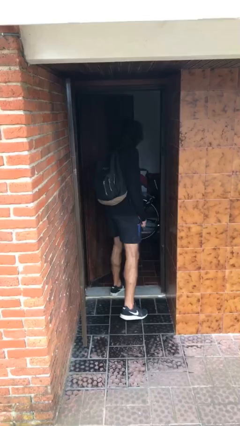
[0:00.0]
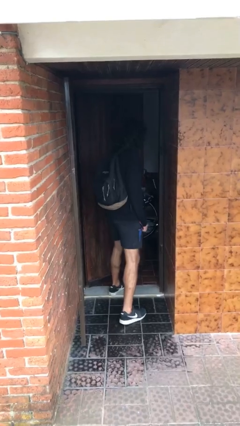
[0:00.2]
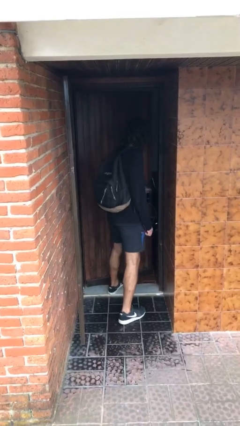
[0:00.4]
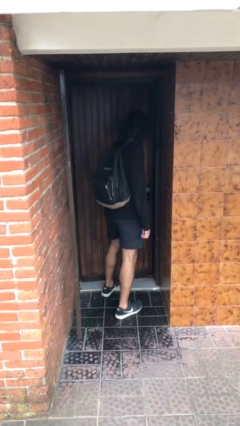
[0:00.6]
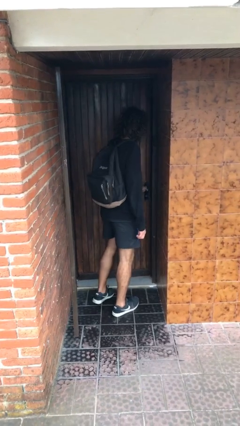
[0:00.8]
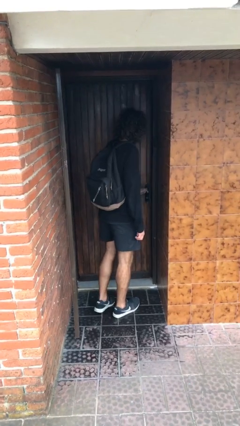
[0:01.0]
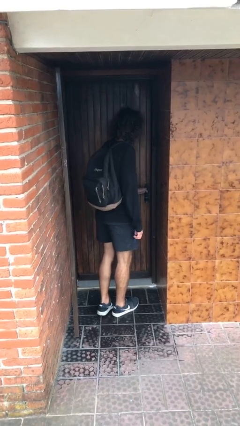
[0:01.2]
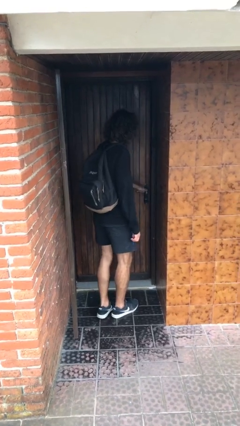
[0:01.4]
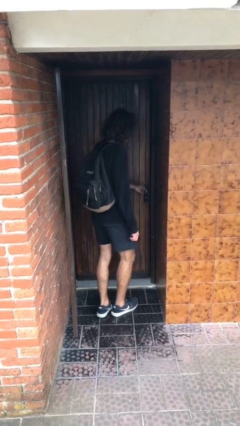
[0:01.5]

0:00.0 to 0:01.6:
person closes facility door

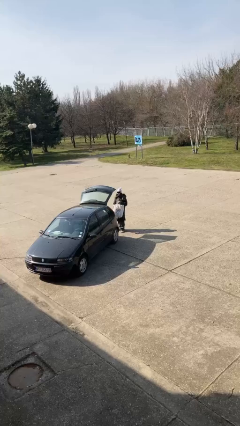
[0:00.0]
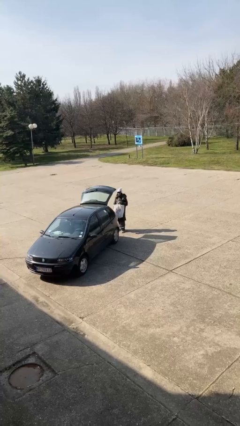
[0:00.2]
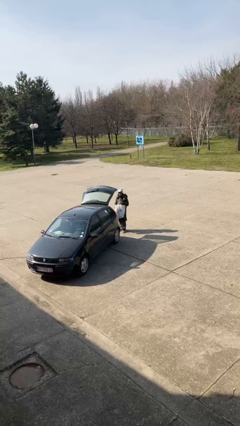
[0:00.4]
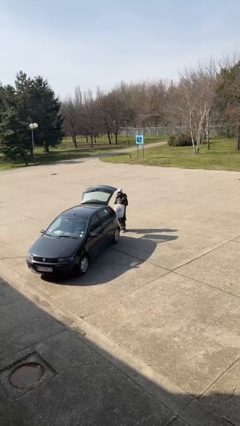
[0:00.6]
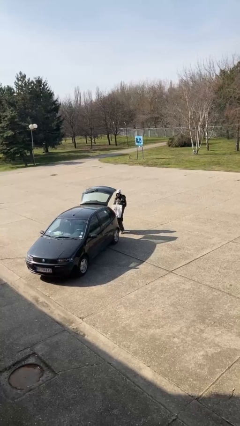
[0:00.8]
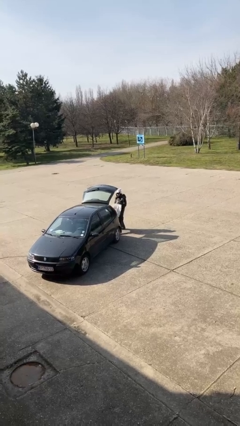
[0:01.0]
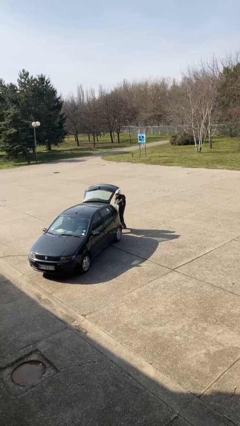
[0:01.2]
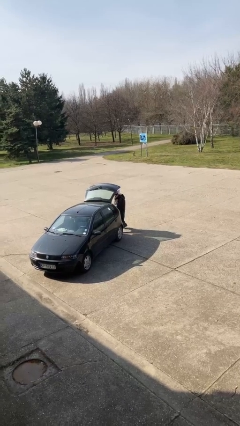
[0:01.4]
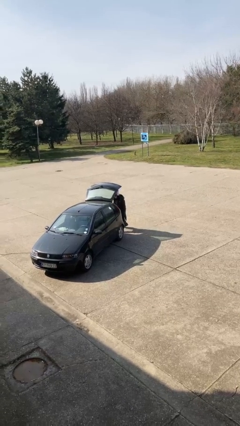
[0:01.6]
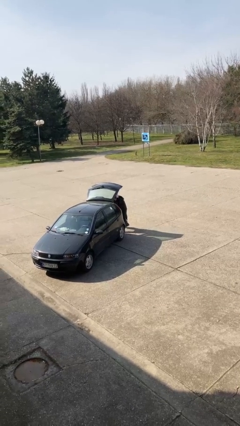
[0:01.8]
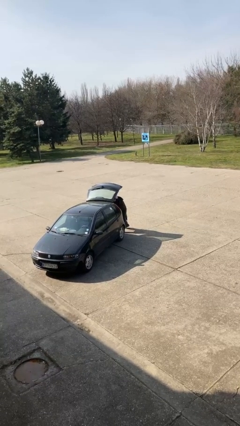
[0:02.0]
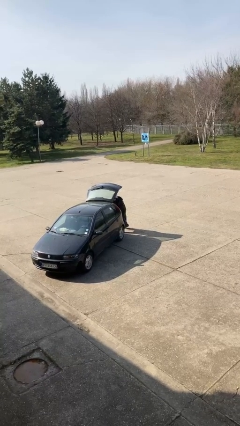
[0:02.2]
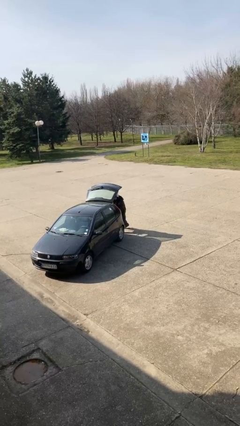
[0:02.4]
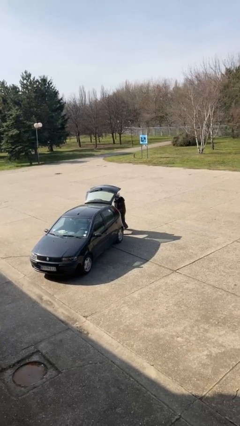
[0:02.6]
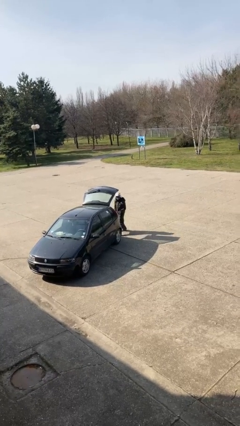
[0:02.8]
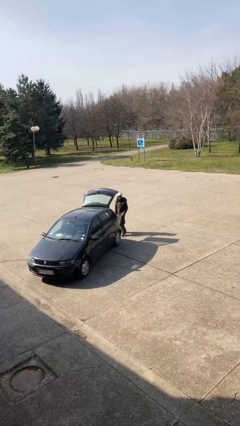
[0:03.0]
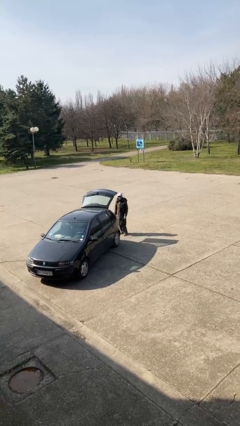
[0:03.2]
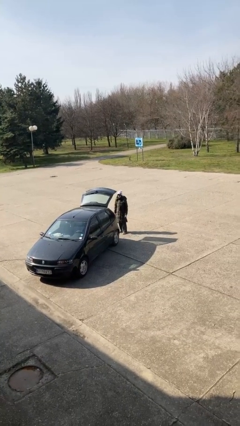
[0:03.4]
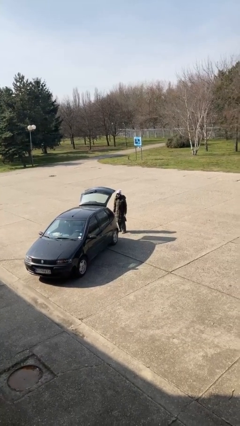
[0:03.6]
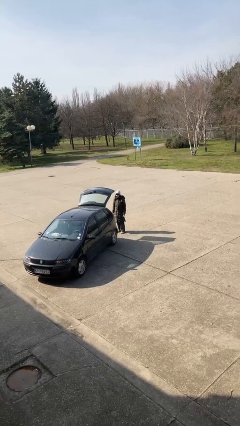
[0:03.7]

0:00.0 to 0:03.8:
person loads car

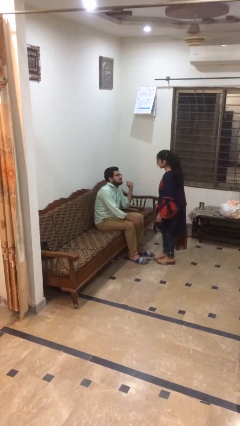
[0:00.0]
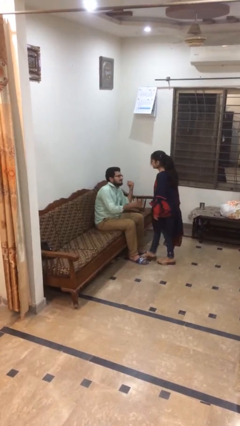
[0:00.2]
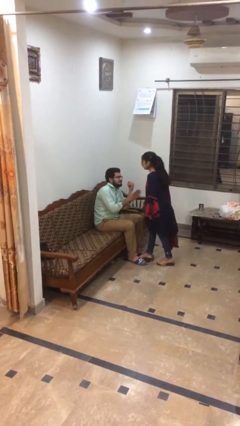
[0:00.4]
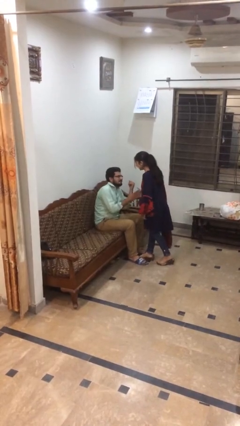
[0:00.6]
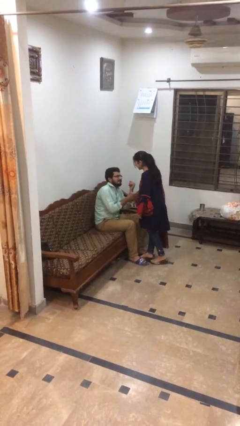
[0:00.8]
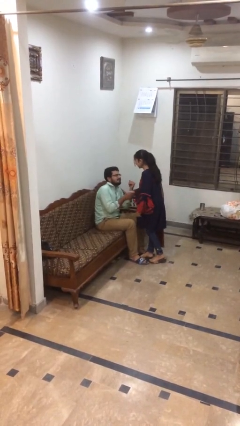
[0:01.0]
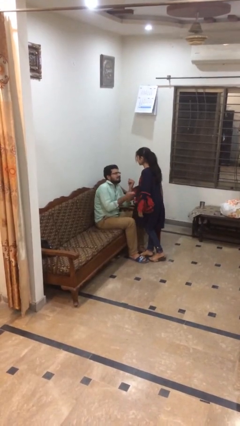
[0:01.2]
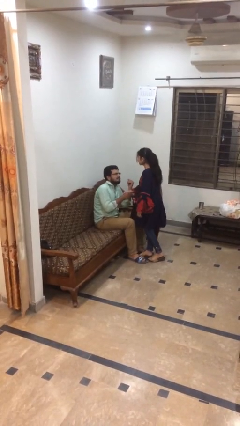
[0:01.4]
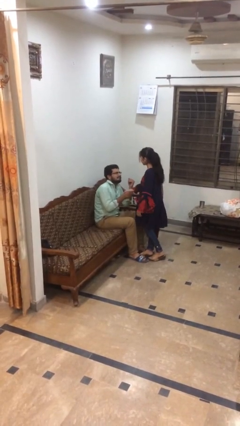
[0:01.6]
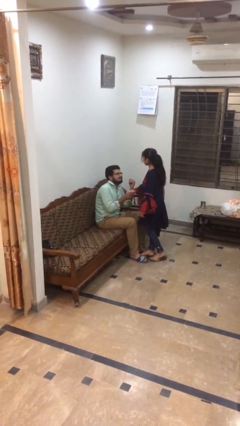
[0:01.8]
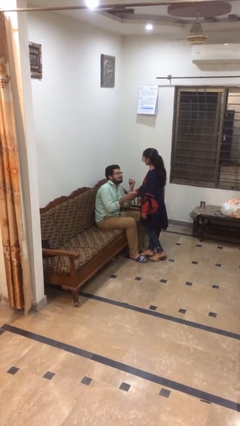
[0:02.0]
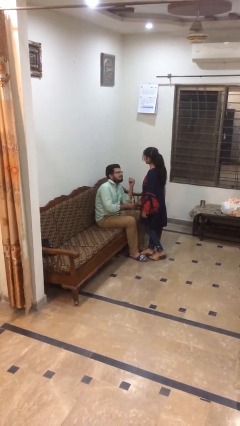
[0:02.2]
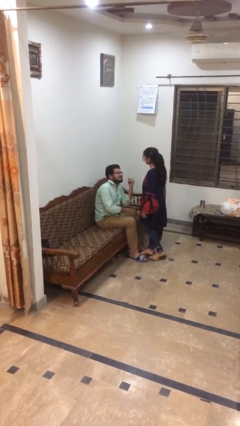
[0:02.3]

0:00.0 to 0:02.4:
person shakes hand

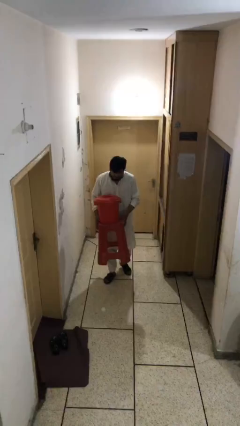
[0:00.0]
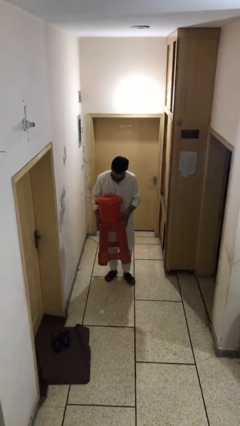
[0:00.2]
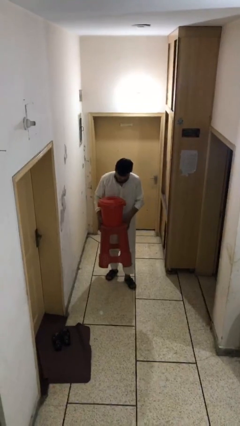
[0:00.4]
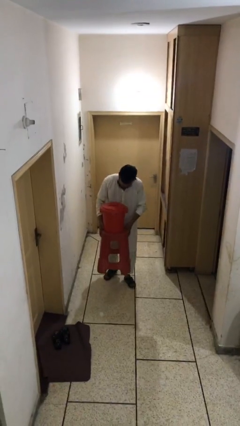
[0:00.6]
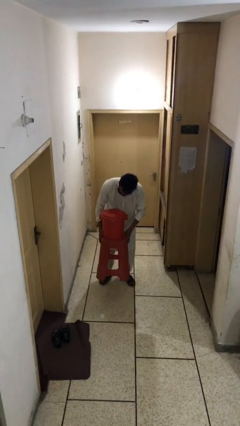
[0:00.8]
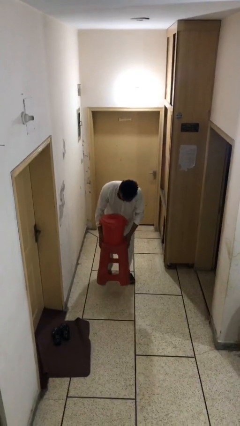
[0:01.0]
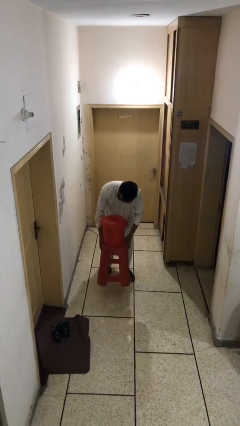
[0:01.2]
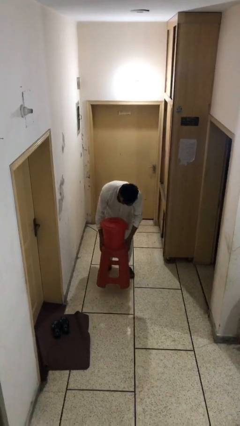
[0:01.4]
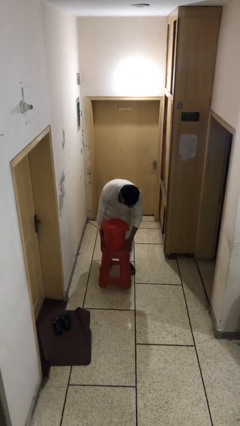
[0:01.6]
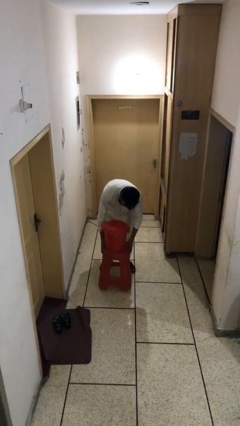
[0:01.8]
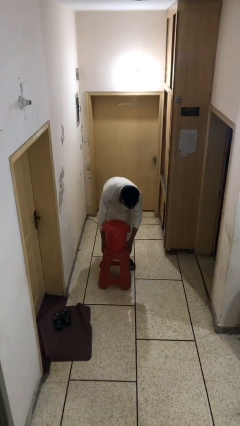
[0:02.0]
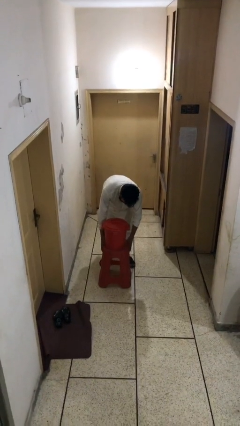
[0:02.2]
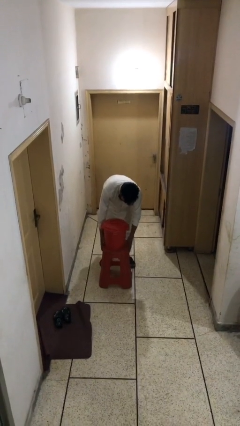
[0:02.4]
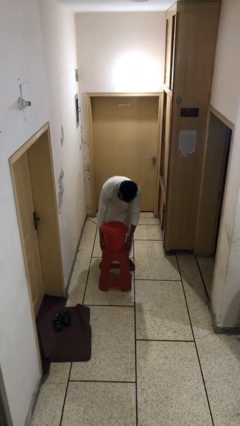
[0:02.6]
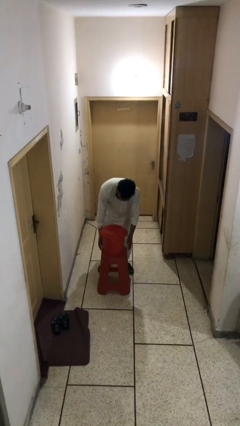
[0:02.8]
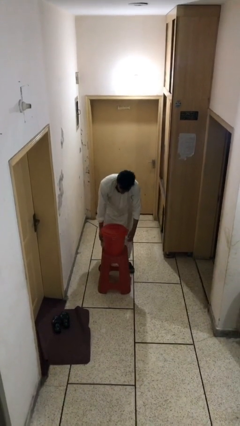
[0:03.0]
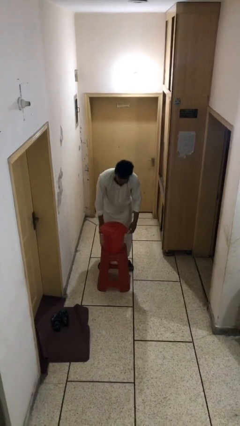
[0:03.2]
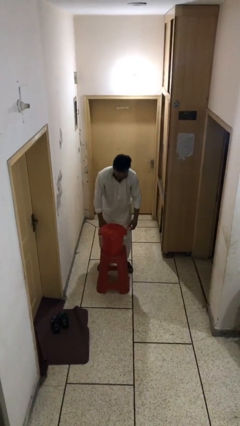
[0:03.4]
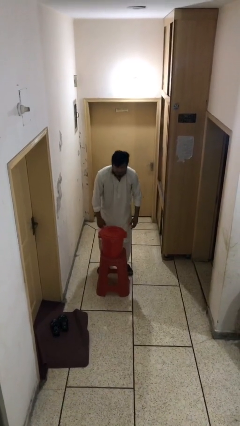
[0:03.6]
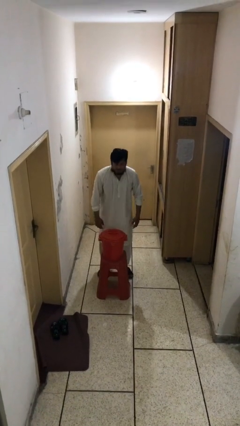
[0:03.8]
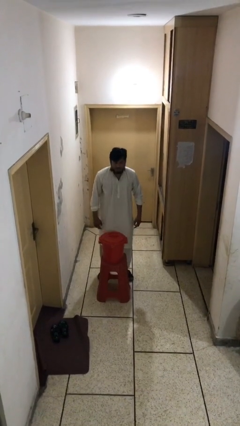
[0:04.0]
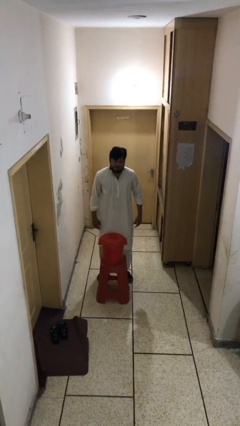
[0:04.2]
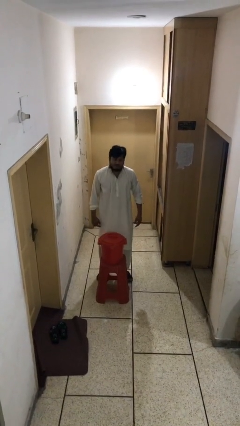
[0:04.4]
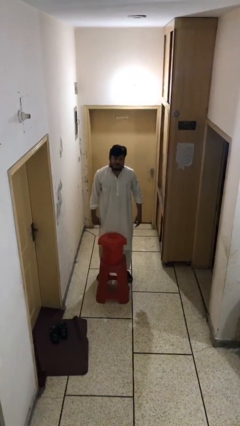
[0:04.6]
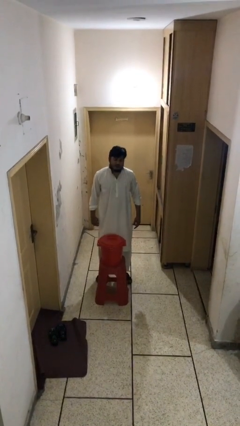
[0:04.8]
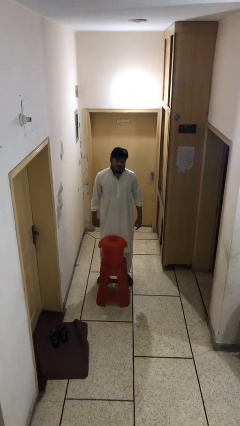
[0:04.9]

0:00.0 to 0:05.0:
person puts down object on floor

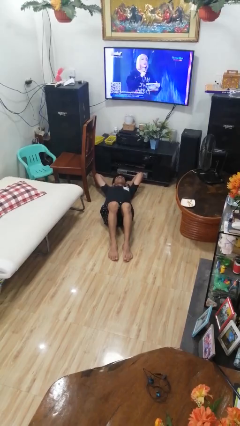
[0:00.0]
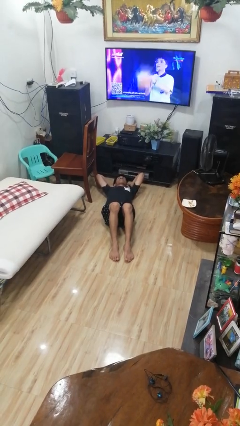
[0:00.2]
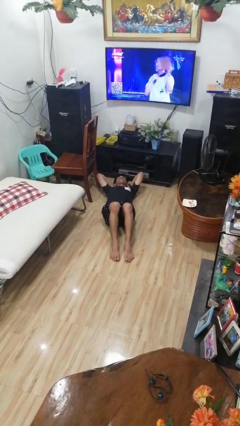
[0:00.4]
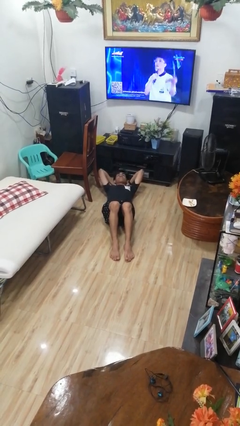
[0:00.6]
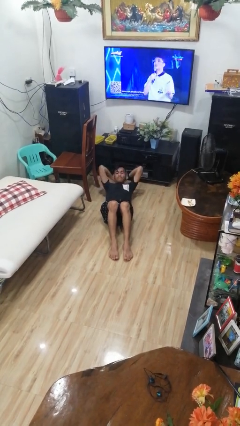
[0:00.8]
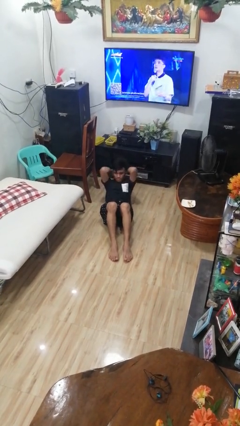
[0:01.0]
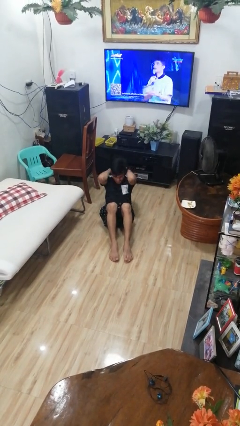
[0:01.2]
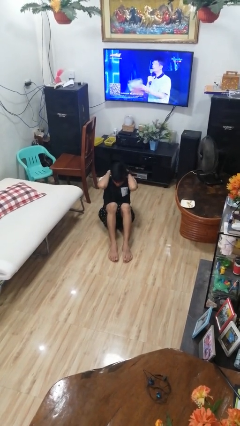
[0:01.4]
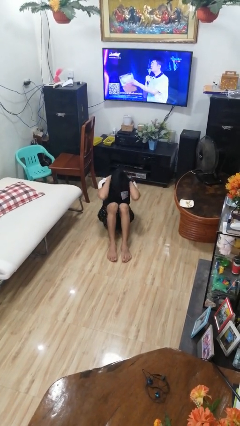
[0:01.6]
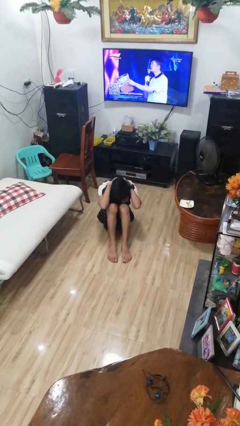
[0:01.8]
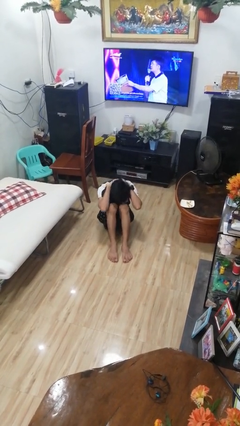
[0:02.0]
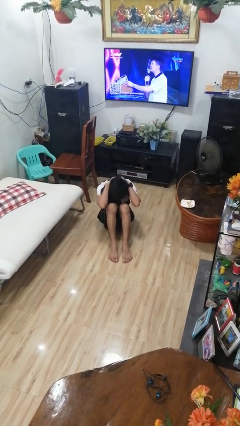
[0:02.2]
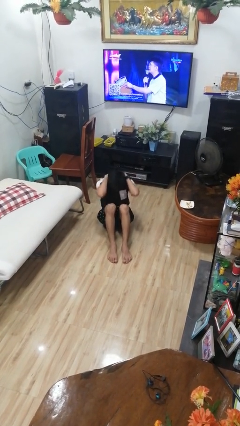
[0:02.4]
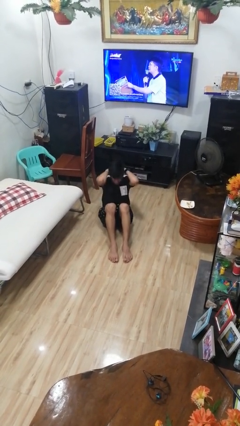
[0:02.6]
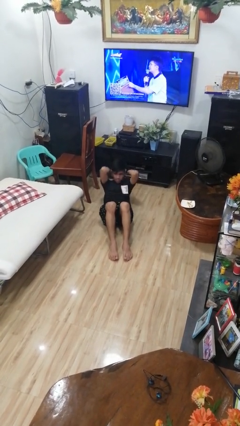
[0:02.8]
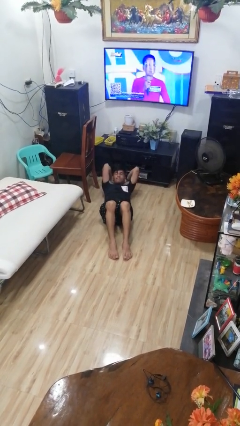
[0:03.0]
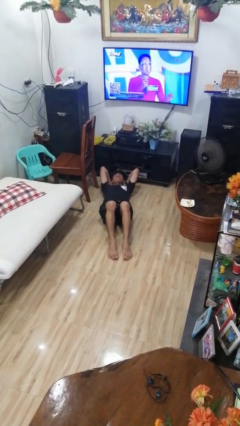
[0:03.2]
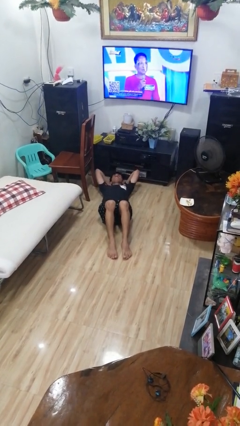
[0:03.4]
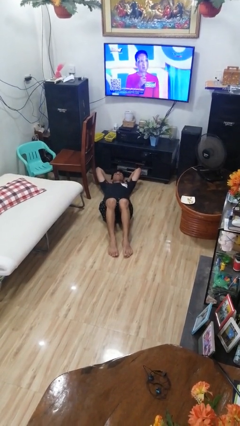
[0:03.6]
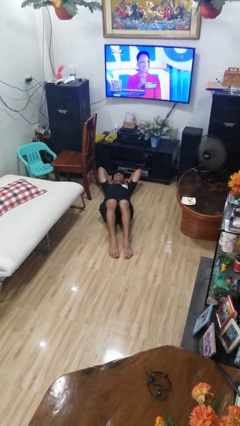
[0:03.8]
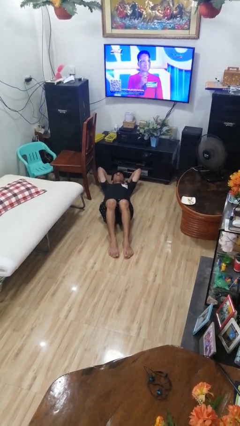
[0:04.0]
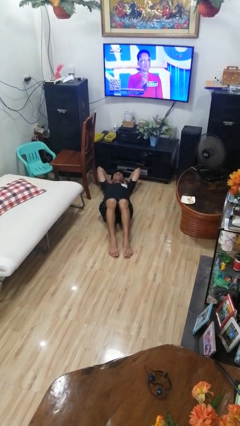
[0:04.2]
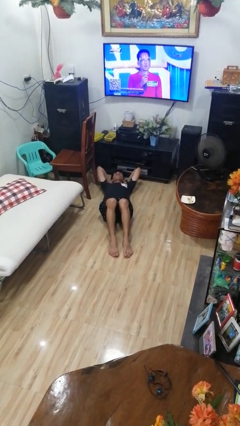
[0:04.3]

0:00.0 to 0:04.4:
person exercises with situp
